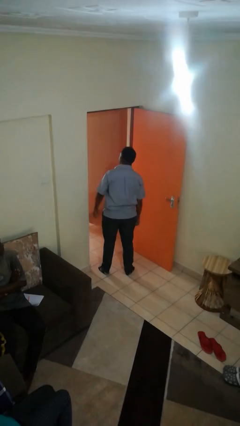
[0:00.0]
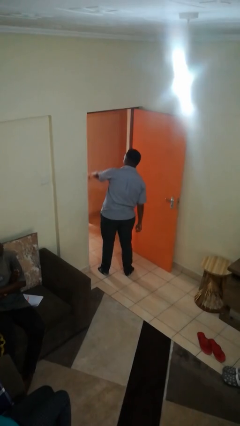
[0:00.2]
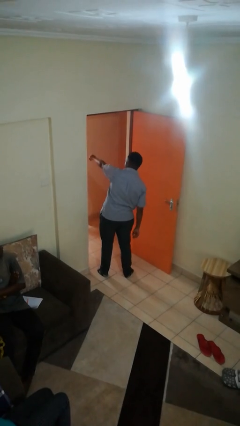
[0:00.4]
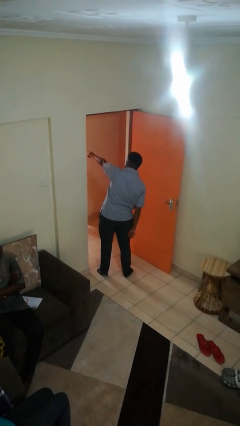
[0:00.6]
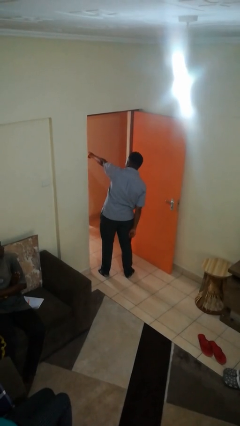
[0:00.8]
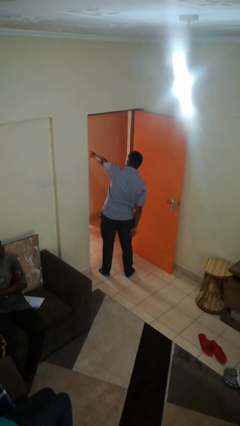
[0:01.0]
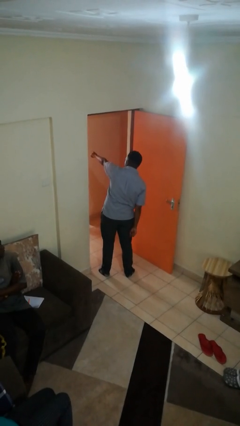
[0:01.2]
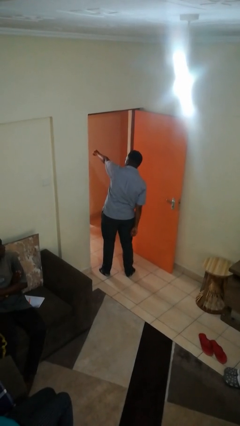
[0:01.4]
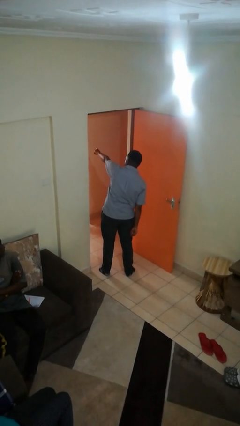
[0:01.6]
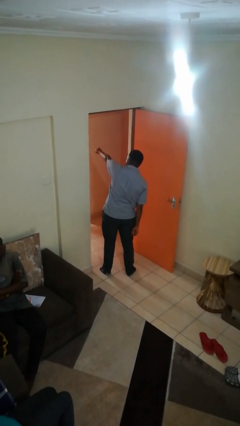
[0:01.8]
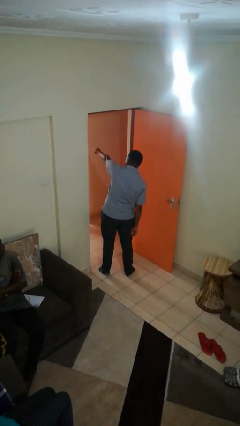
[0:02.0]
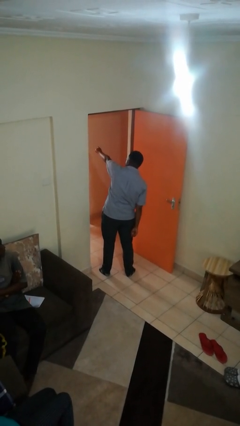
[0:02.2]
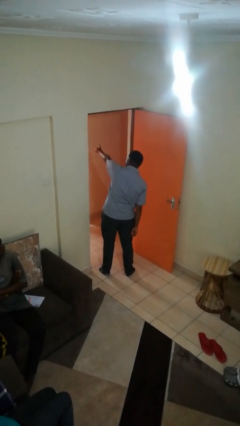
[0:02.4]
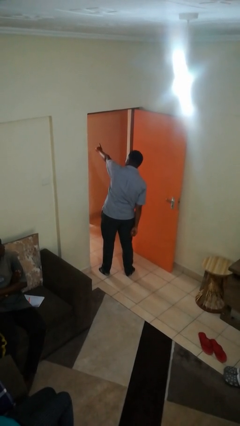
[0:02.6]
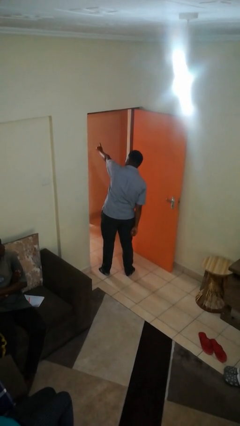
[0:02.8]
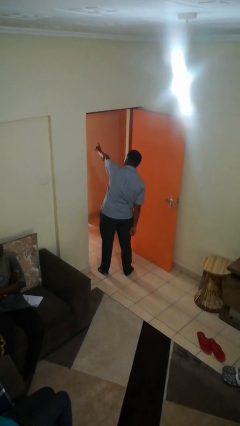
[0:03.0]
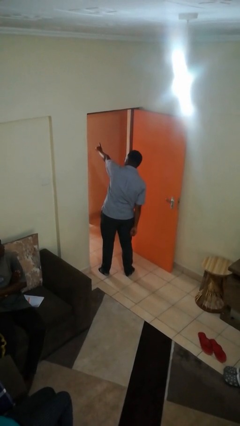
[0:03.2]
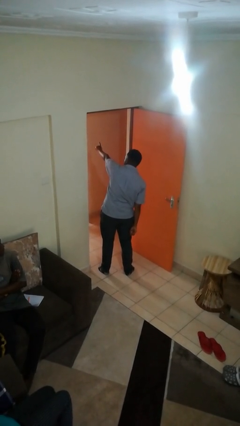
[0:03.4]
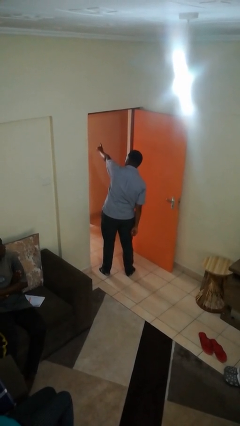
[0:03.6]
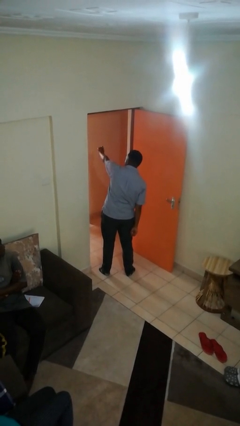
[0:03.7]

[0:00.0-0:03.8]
person points at person

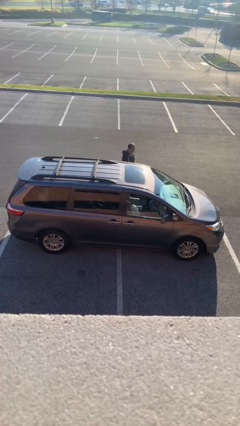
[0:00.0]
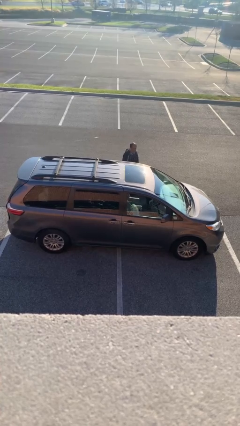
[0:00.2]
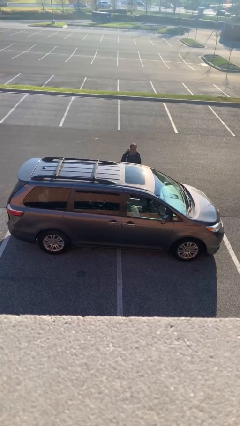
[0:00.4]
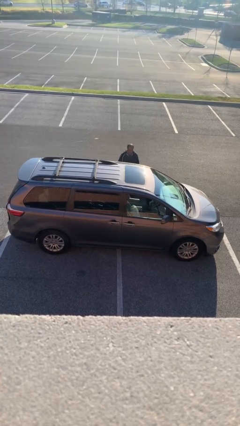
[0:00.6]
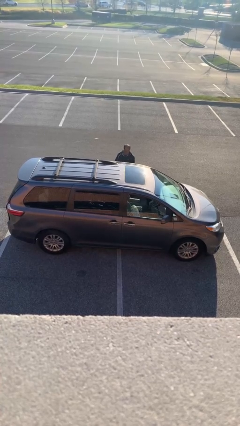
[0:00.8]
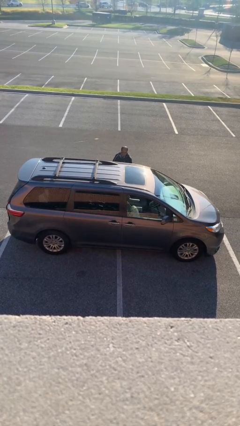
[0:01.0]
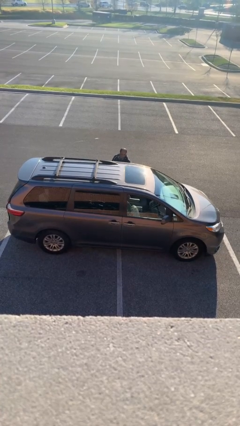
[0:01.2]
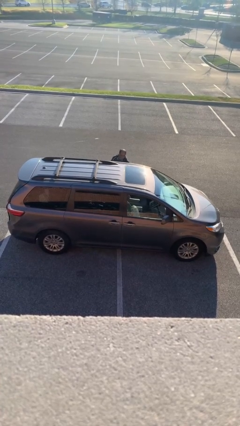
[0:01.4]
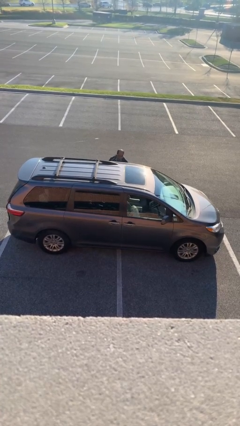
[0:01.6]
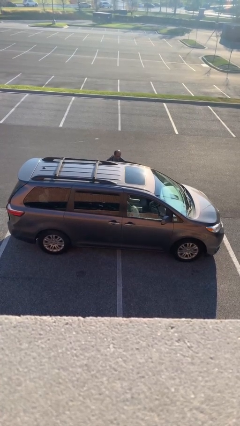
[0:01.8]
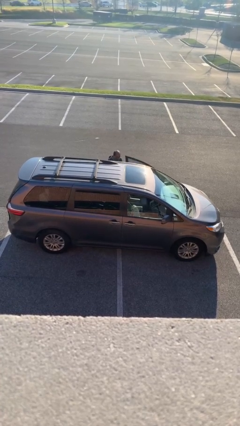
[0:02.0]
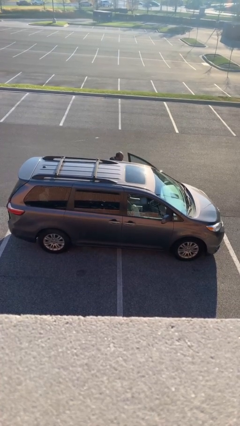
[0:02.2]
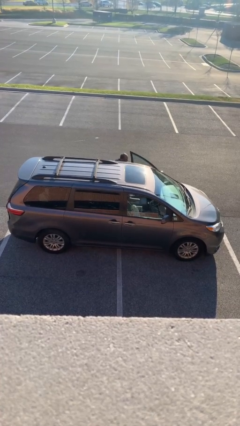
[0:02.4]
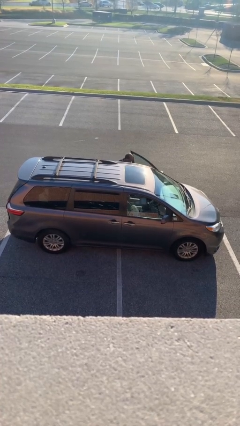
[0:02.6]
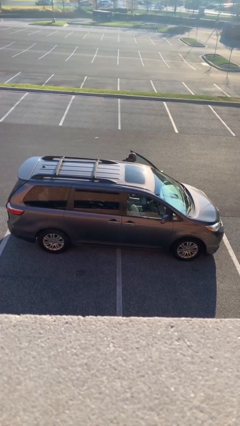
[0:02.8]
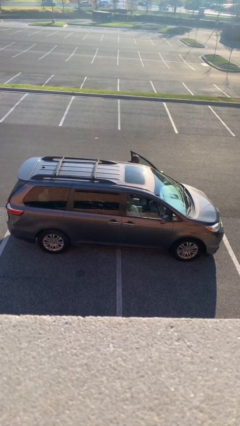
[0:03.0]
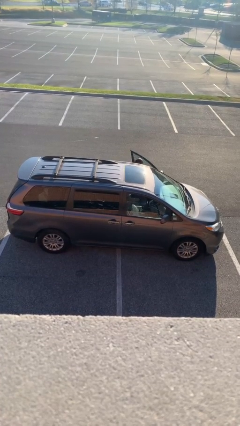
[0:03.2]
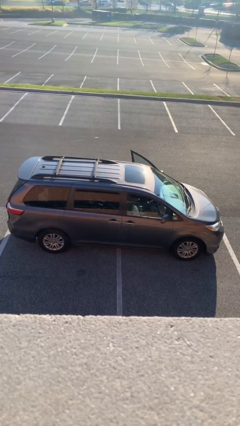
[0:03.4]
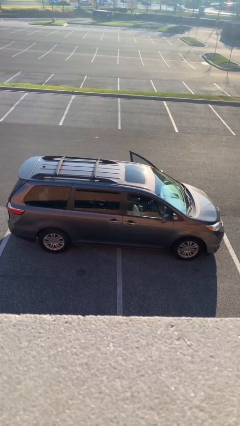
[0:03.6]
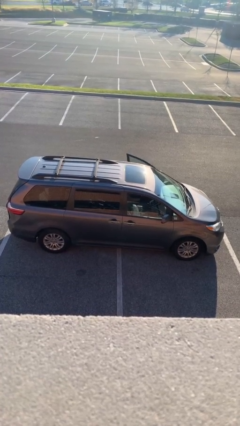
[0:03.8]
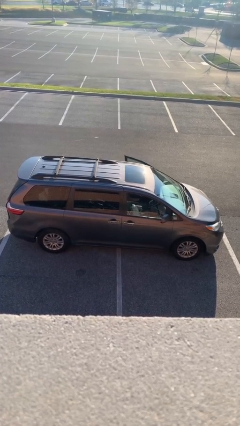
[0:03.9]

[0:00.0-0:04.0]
car picks up person

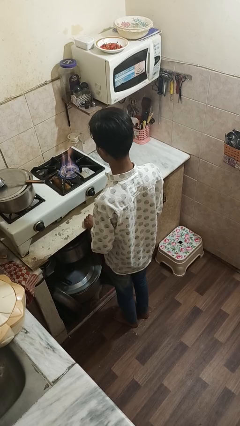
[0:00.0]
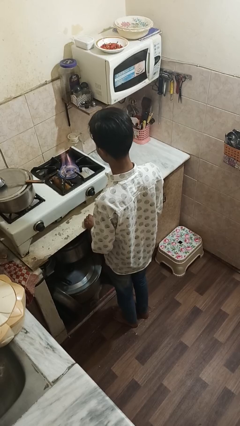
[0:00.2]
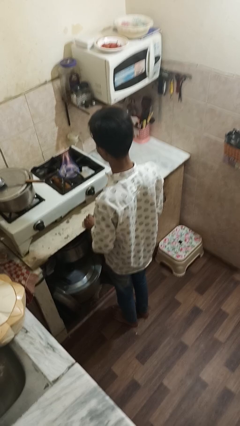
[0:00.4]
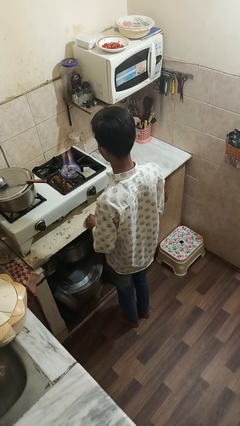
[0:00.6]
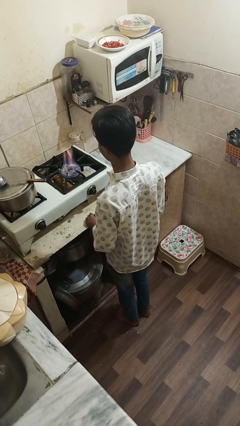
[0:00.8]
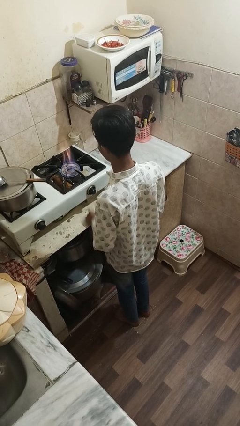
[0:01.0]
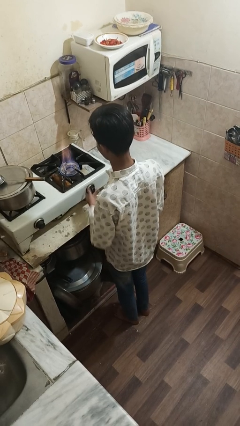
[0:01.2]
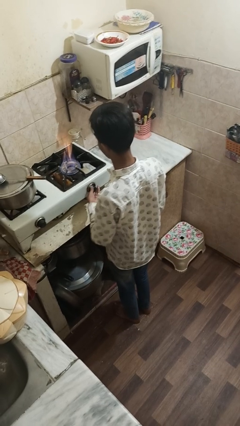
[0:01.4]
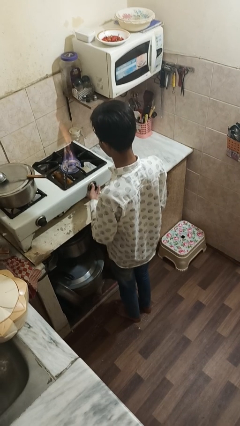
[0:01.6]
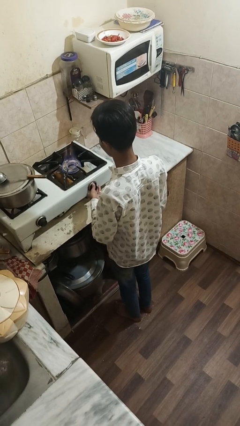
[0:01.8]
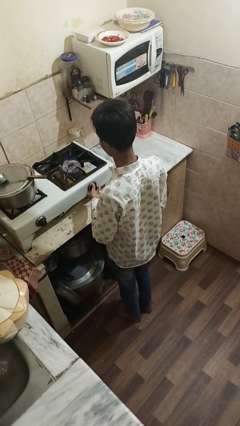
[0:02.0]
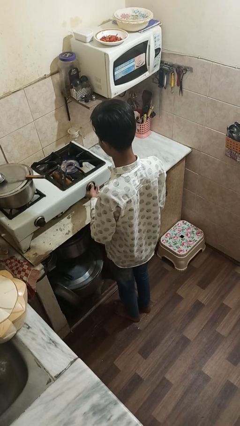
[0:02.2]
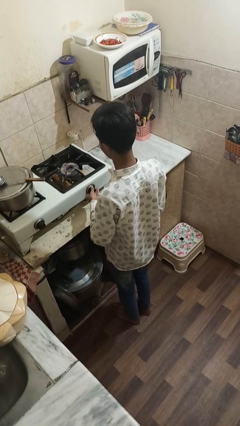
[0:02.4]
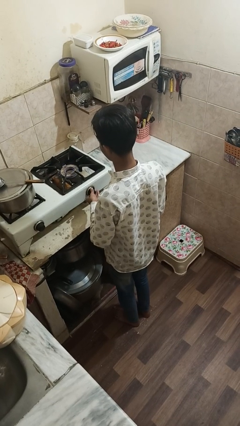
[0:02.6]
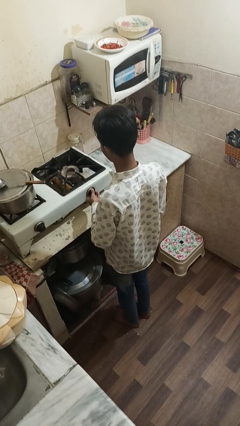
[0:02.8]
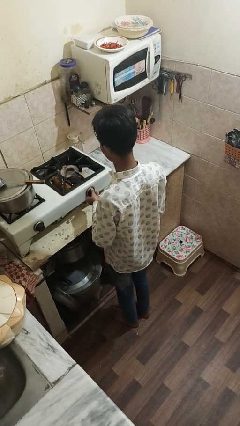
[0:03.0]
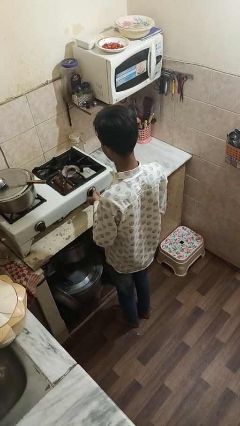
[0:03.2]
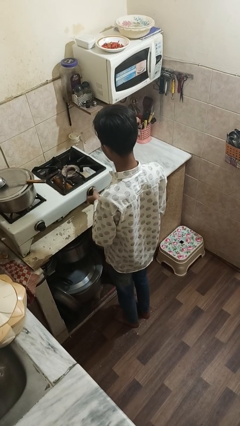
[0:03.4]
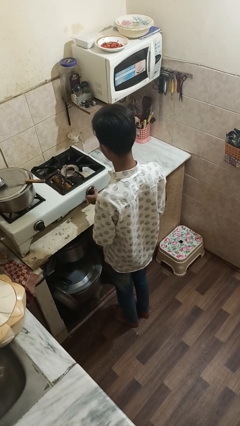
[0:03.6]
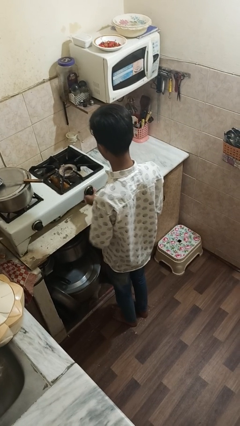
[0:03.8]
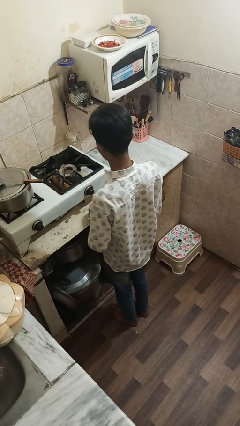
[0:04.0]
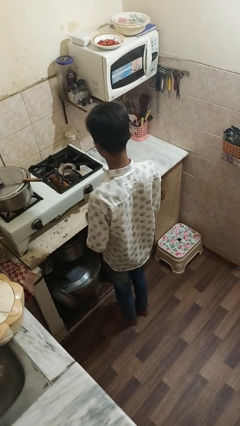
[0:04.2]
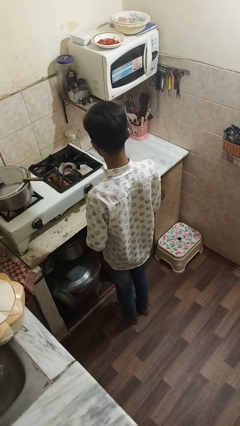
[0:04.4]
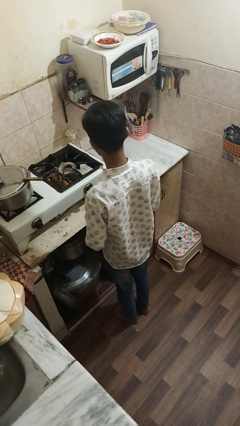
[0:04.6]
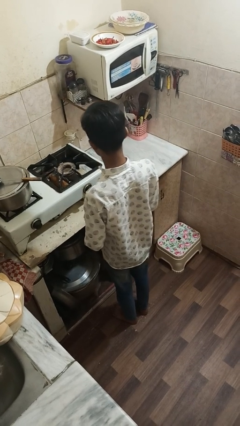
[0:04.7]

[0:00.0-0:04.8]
person turns off stovetop

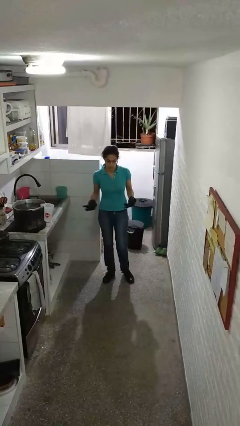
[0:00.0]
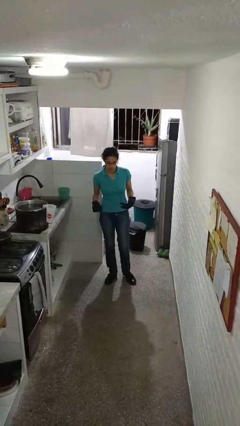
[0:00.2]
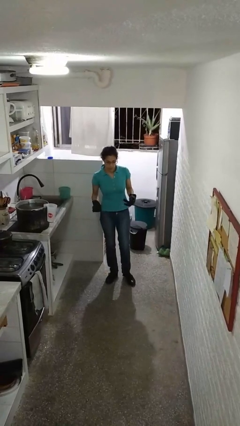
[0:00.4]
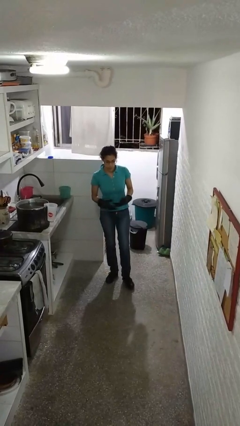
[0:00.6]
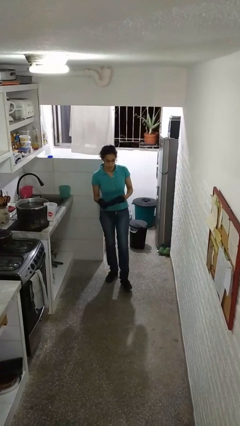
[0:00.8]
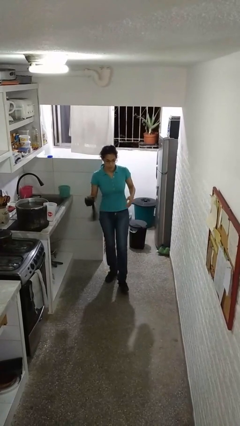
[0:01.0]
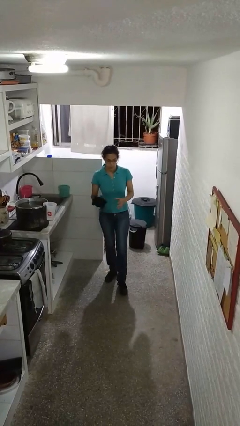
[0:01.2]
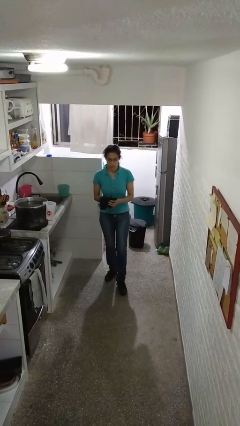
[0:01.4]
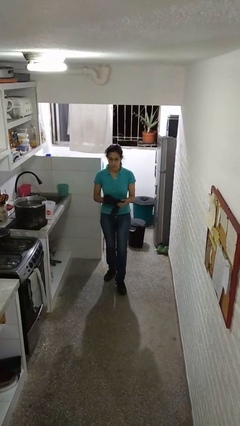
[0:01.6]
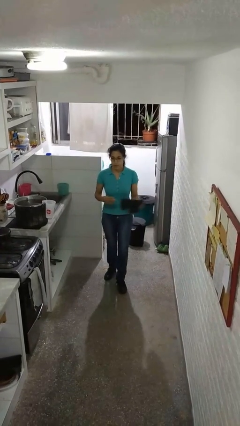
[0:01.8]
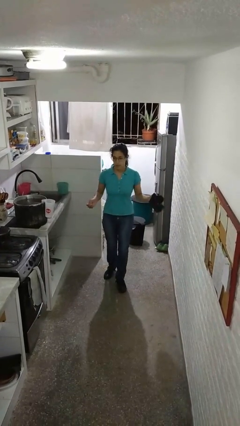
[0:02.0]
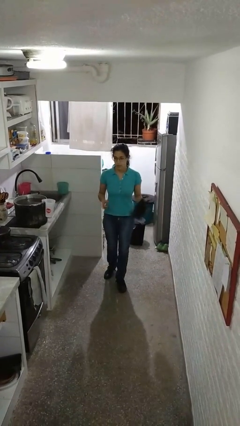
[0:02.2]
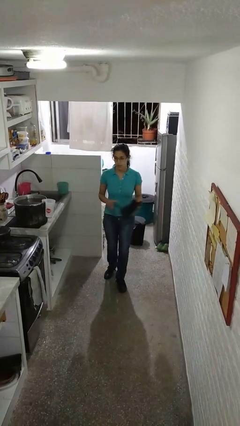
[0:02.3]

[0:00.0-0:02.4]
person takes off gloves

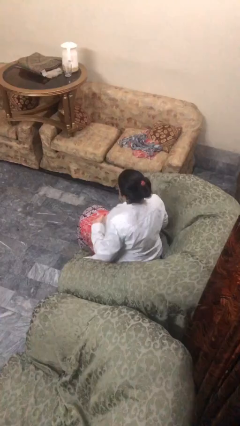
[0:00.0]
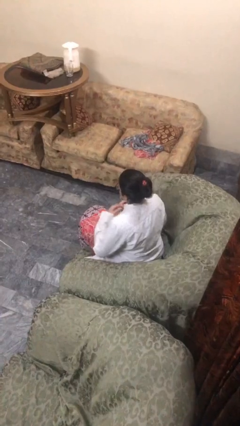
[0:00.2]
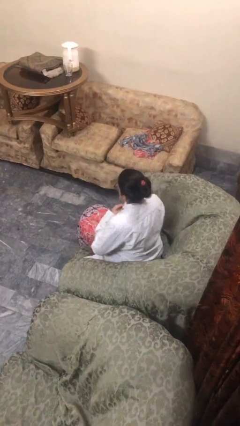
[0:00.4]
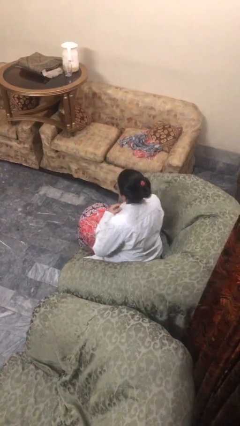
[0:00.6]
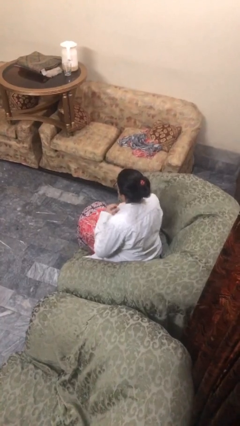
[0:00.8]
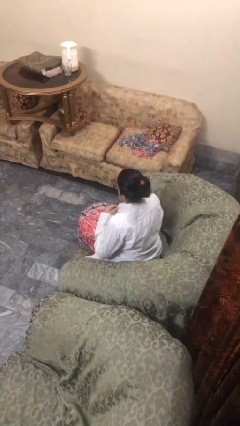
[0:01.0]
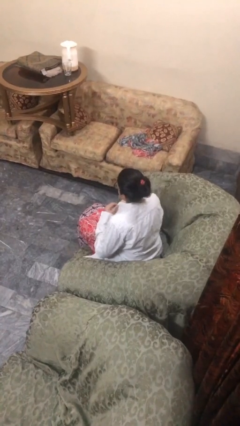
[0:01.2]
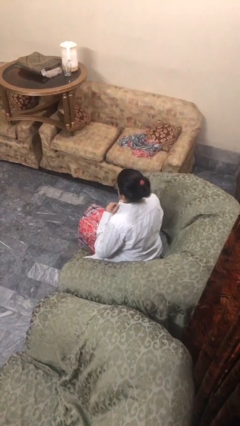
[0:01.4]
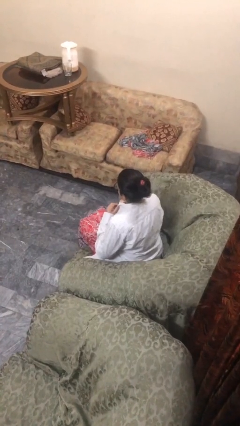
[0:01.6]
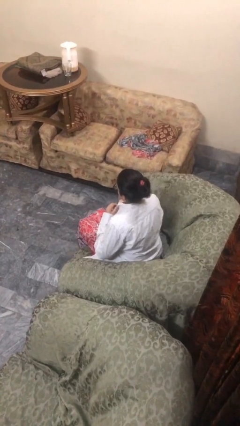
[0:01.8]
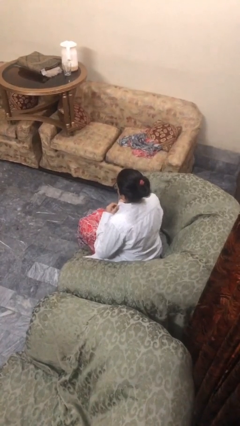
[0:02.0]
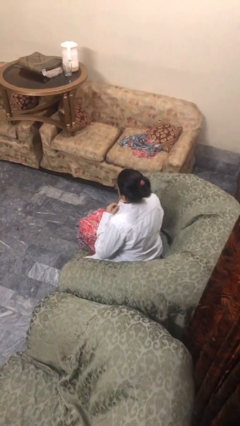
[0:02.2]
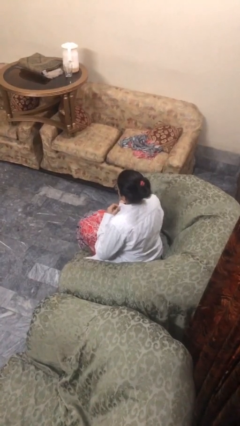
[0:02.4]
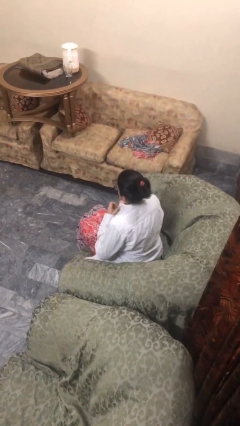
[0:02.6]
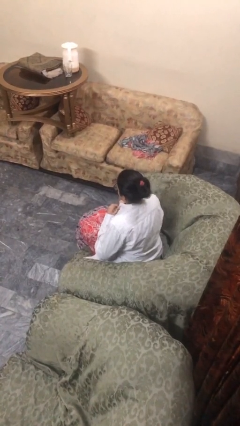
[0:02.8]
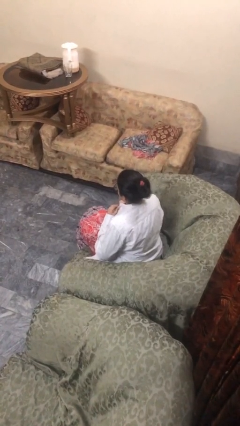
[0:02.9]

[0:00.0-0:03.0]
person buttons shirt
